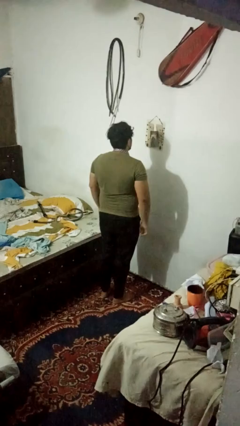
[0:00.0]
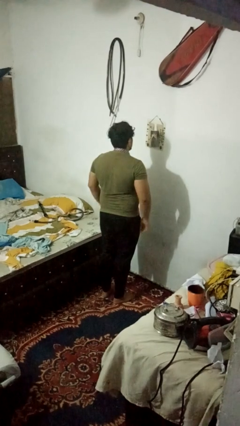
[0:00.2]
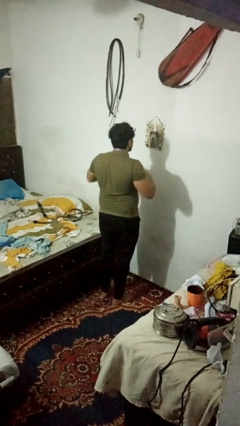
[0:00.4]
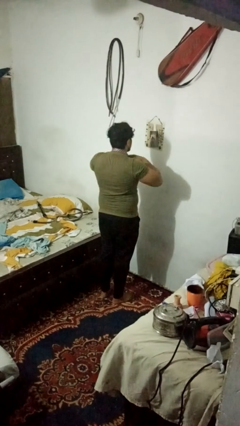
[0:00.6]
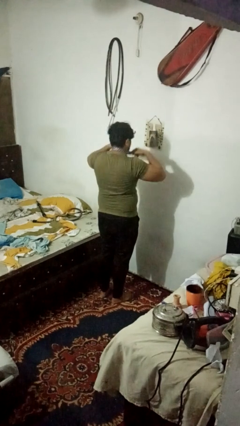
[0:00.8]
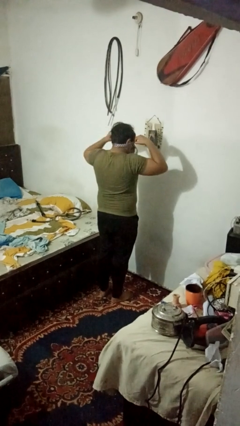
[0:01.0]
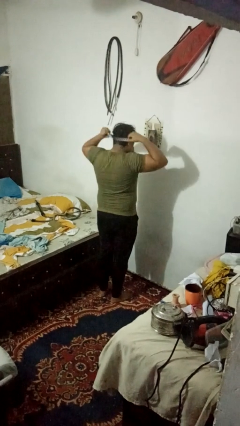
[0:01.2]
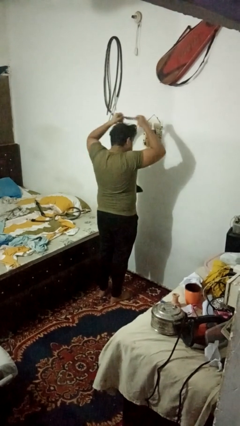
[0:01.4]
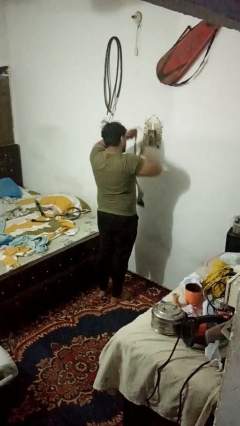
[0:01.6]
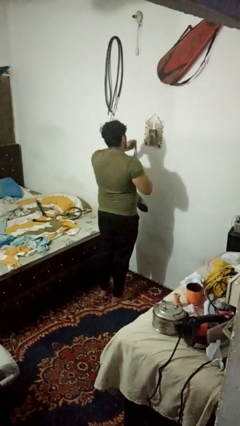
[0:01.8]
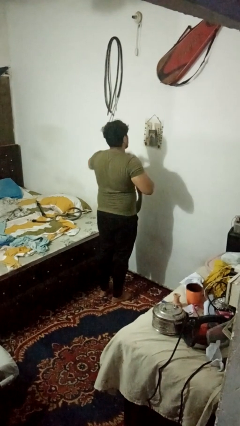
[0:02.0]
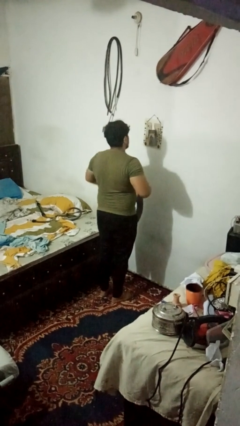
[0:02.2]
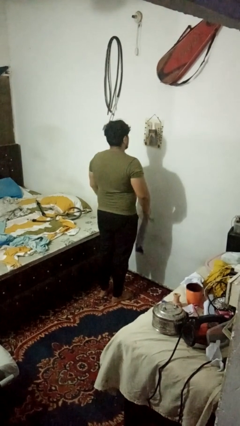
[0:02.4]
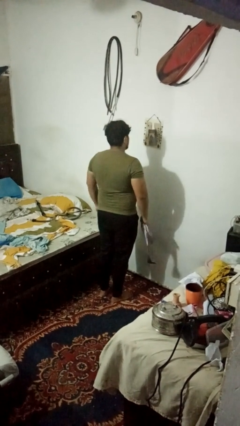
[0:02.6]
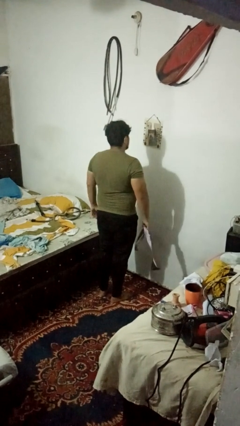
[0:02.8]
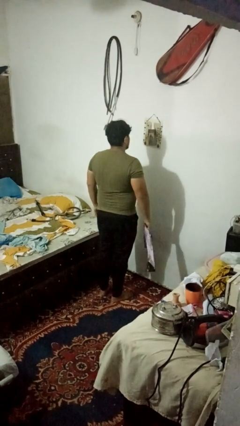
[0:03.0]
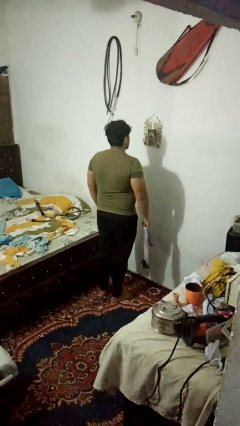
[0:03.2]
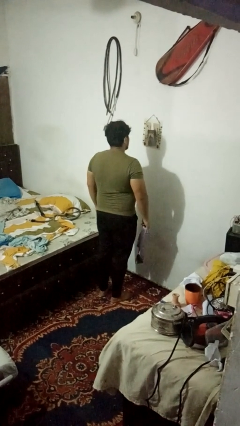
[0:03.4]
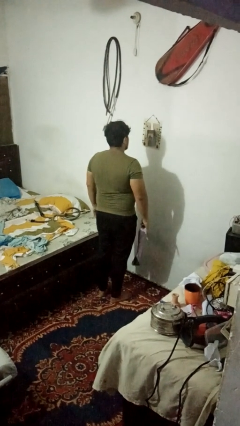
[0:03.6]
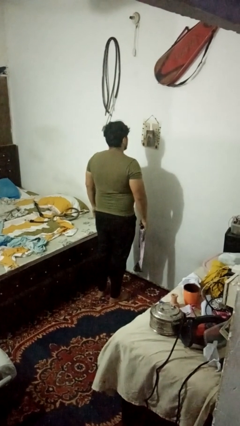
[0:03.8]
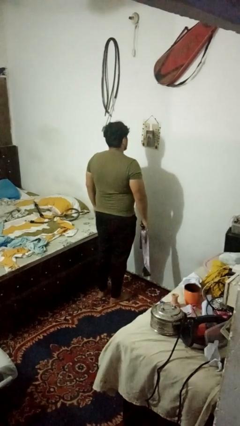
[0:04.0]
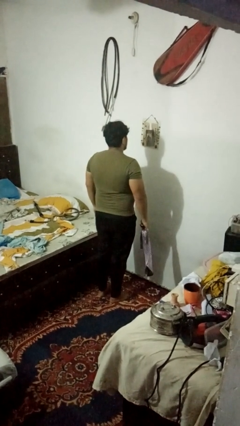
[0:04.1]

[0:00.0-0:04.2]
person takes off necktie

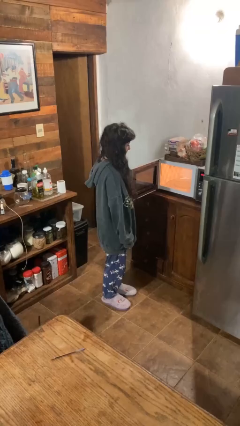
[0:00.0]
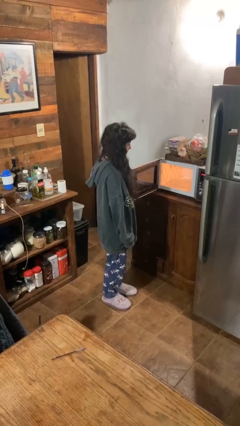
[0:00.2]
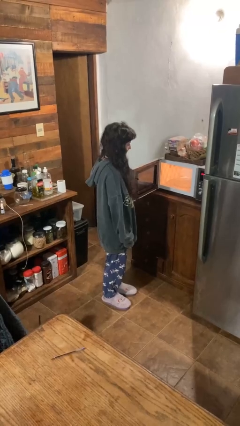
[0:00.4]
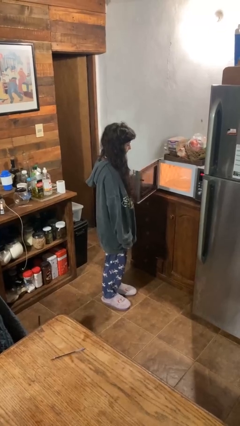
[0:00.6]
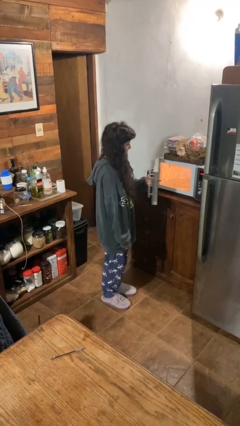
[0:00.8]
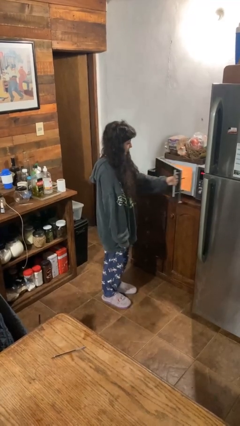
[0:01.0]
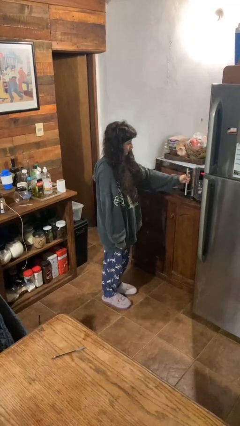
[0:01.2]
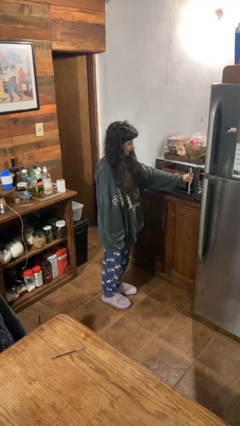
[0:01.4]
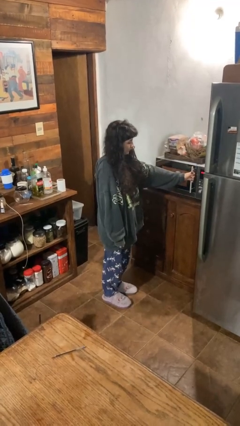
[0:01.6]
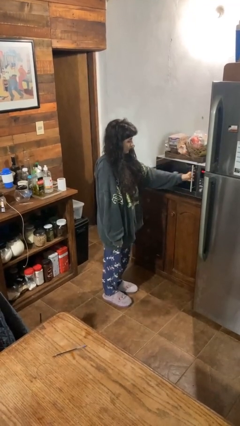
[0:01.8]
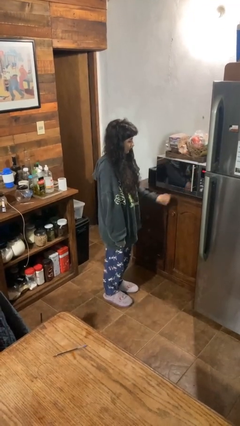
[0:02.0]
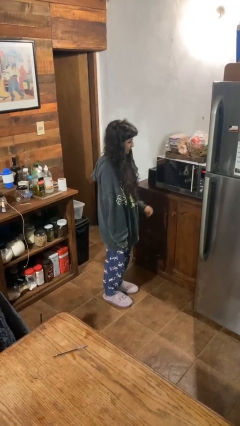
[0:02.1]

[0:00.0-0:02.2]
person closes microwave

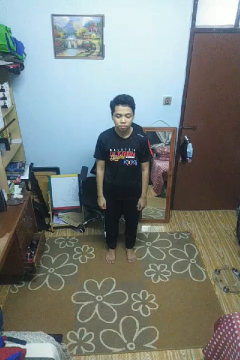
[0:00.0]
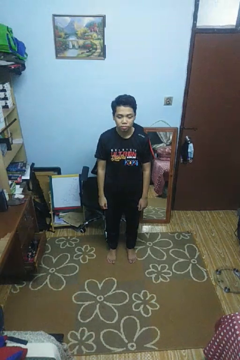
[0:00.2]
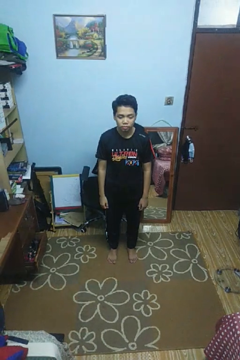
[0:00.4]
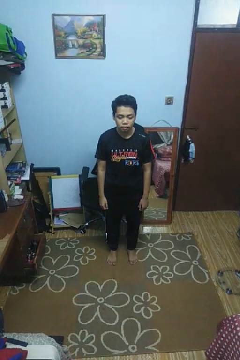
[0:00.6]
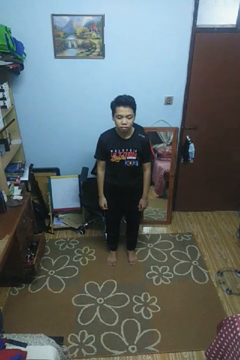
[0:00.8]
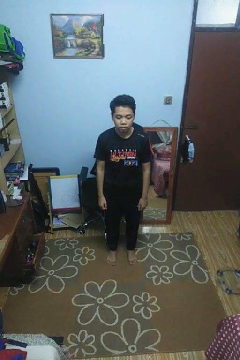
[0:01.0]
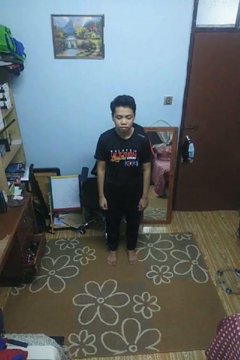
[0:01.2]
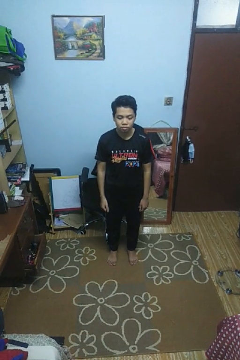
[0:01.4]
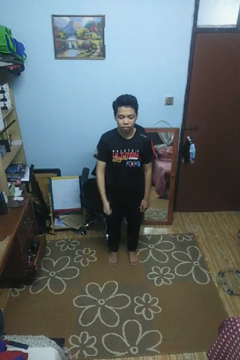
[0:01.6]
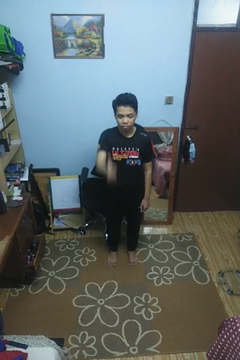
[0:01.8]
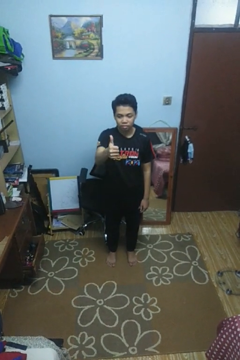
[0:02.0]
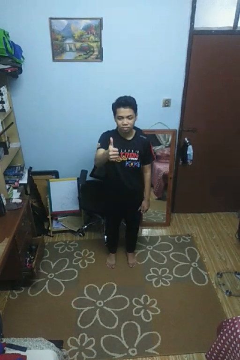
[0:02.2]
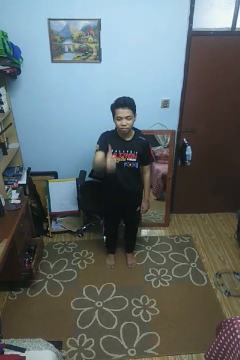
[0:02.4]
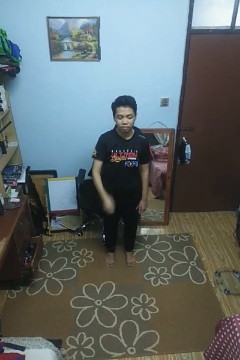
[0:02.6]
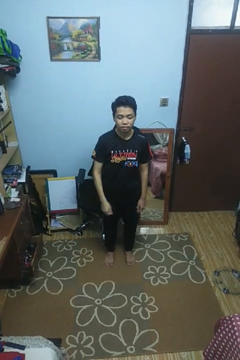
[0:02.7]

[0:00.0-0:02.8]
person gestures thumbs up

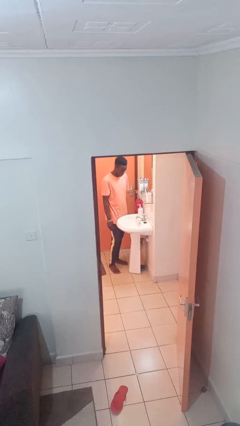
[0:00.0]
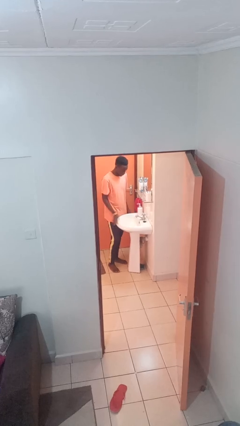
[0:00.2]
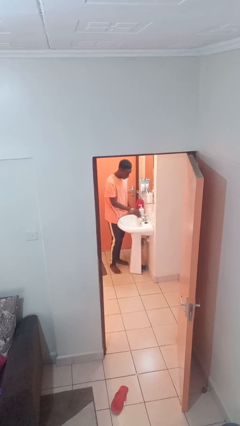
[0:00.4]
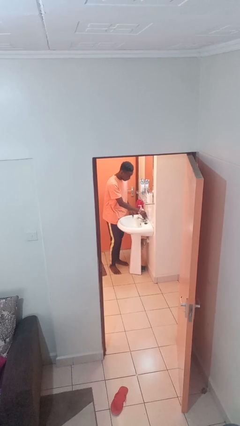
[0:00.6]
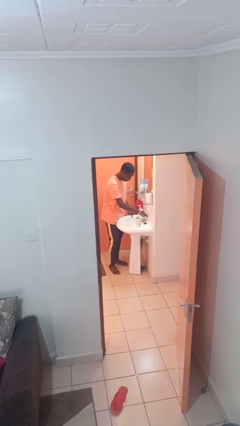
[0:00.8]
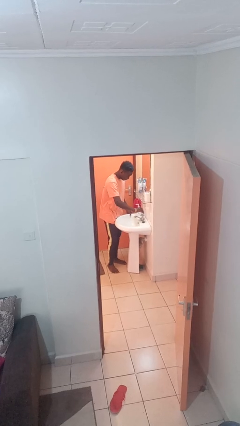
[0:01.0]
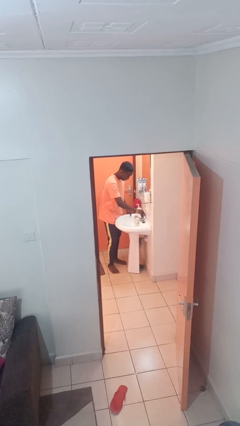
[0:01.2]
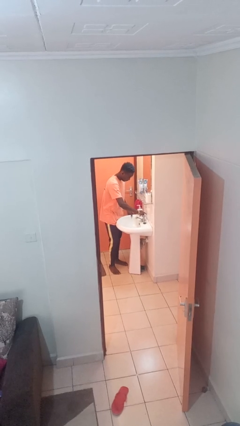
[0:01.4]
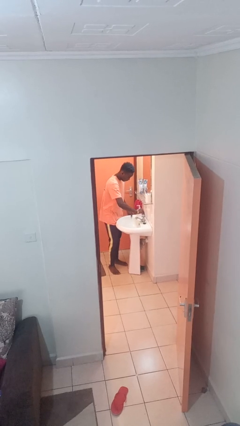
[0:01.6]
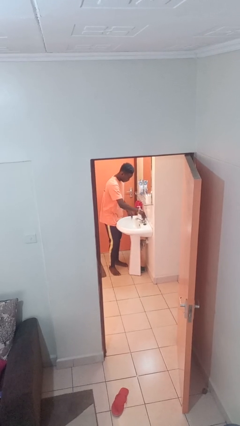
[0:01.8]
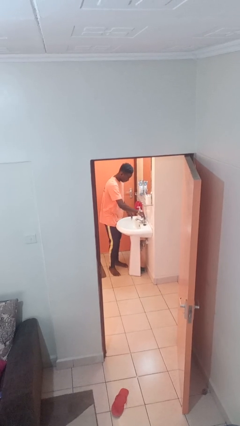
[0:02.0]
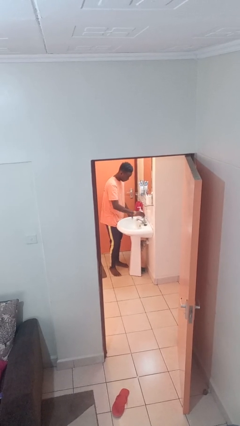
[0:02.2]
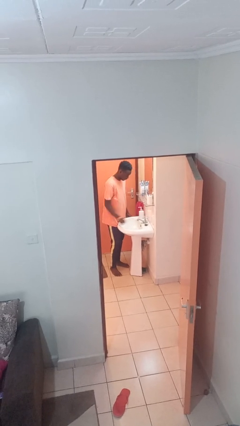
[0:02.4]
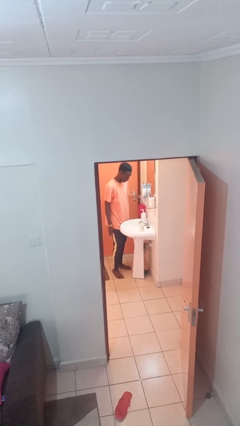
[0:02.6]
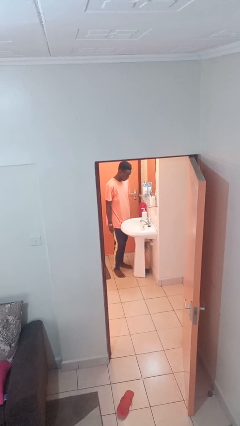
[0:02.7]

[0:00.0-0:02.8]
person turns on faucet

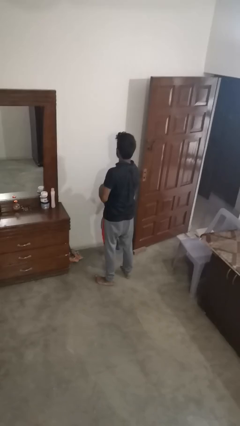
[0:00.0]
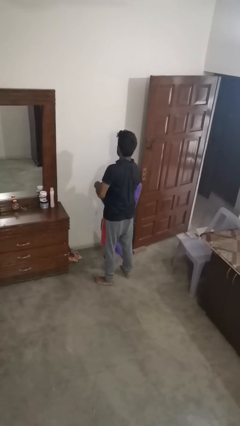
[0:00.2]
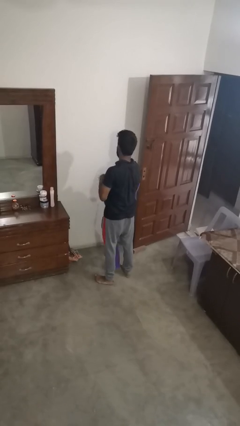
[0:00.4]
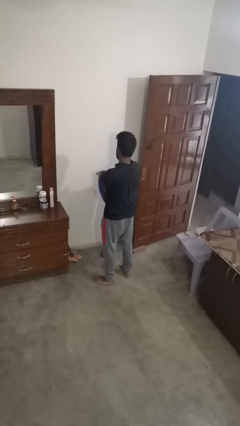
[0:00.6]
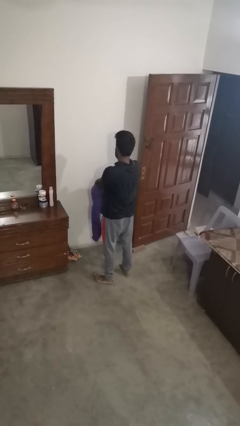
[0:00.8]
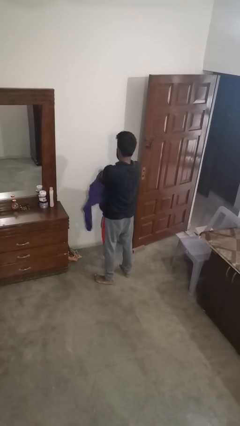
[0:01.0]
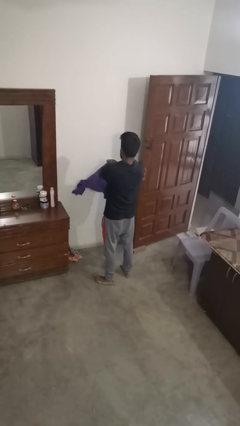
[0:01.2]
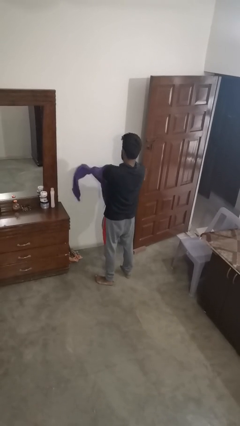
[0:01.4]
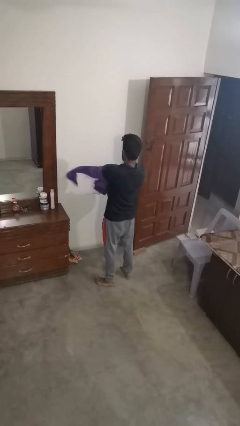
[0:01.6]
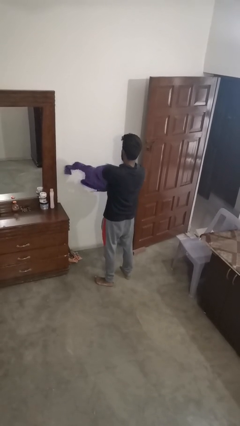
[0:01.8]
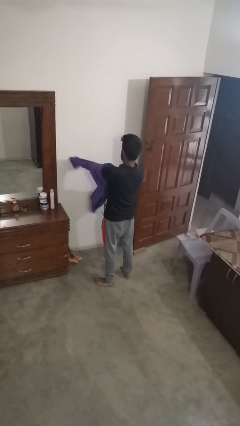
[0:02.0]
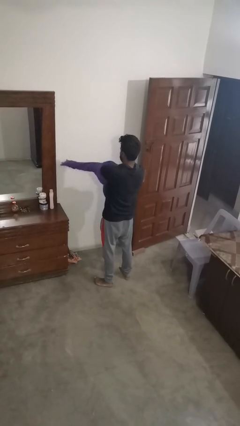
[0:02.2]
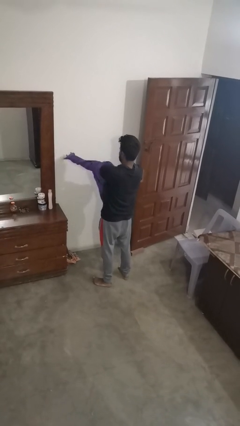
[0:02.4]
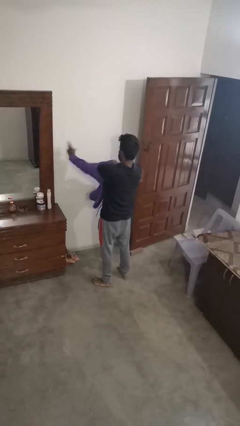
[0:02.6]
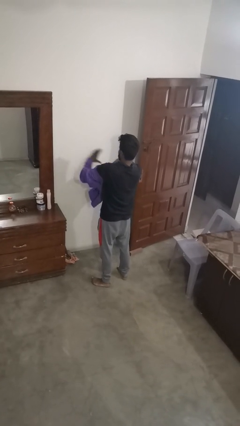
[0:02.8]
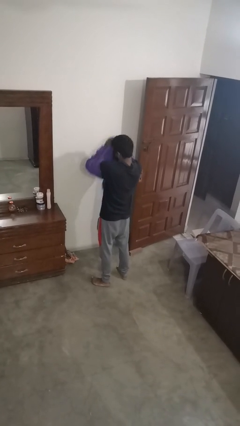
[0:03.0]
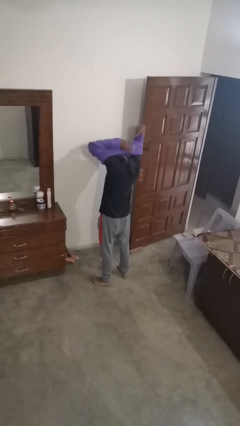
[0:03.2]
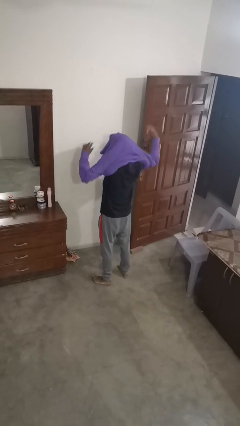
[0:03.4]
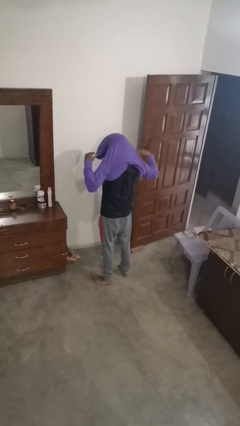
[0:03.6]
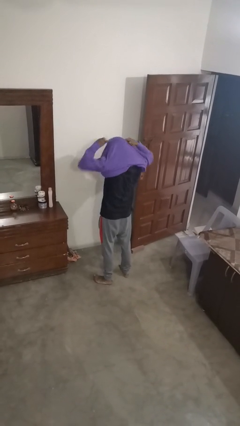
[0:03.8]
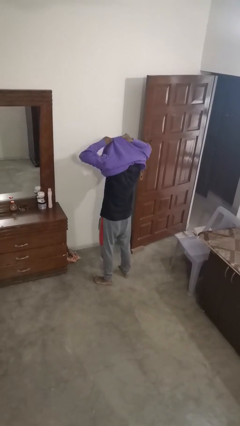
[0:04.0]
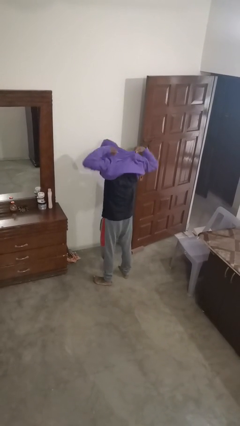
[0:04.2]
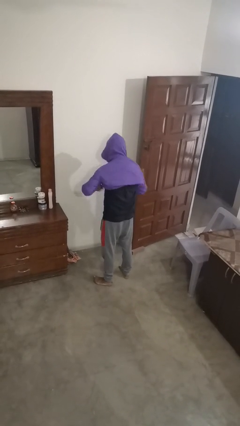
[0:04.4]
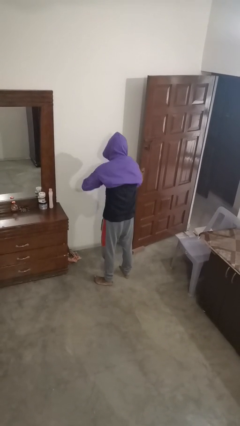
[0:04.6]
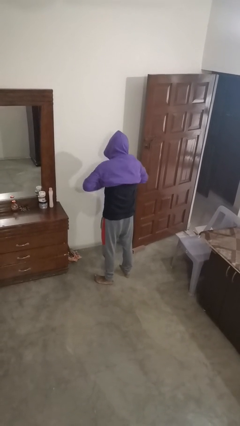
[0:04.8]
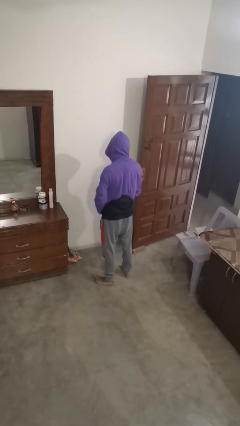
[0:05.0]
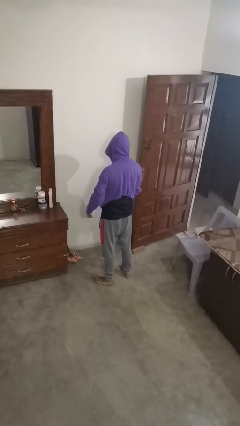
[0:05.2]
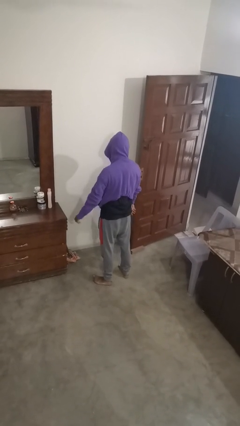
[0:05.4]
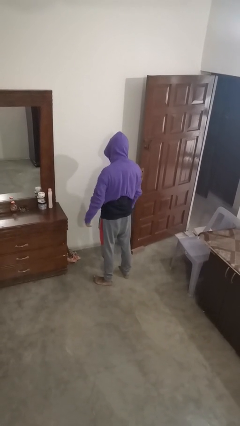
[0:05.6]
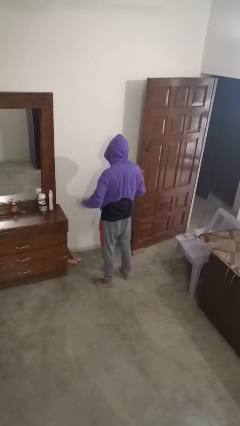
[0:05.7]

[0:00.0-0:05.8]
person puts on hoodie
